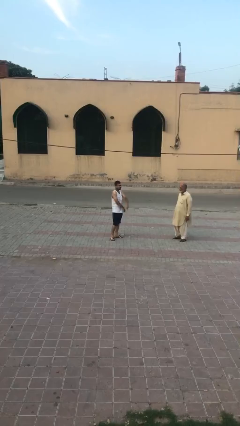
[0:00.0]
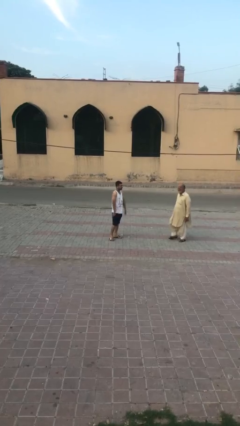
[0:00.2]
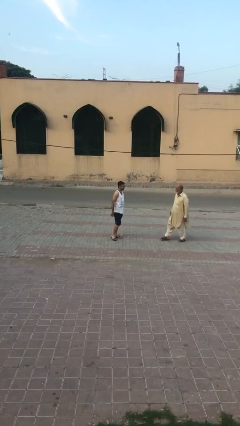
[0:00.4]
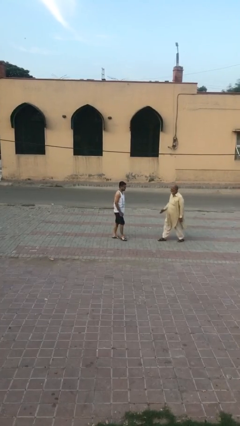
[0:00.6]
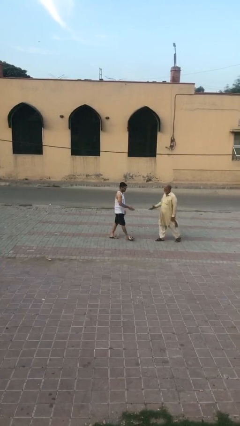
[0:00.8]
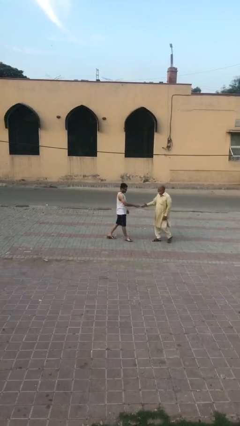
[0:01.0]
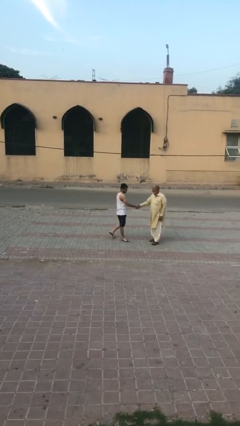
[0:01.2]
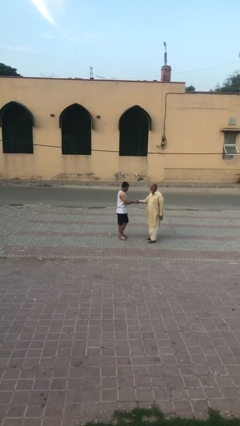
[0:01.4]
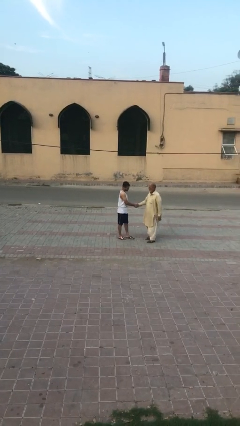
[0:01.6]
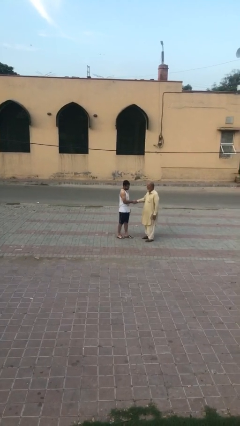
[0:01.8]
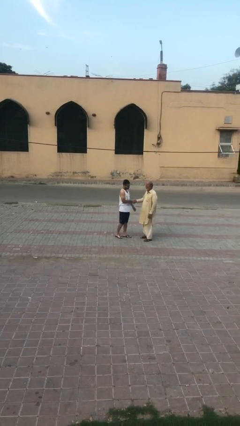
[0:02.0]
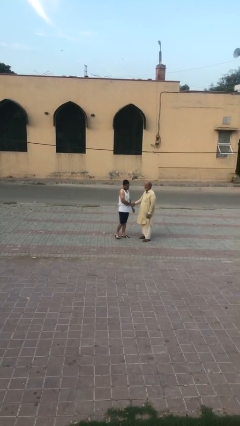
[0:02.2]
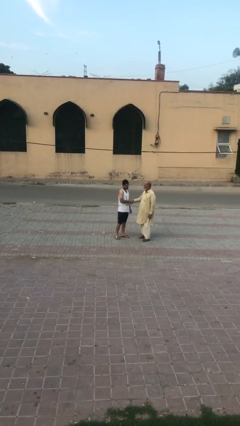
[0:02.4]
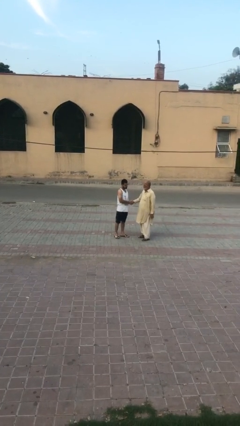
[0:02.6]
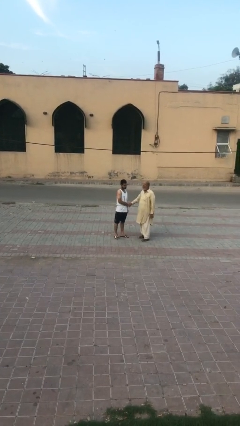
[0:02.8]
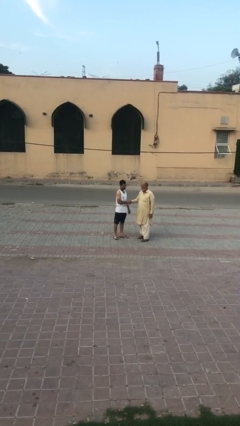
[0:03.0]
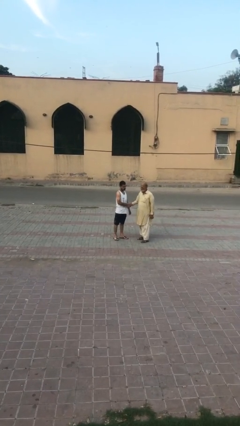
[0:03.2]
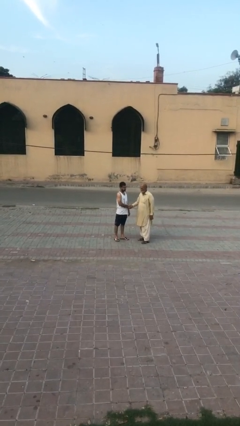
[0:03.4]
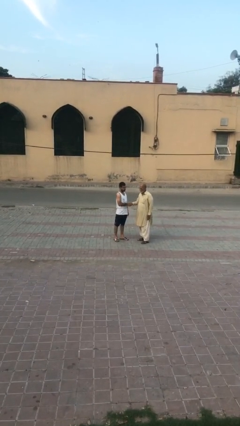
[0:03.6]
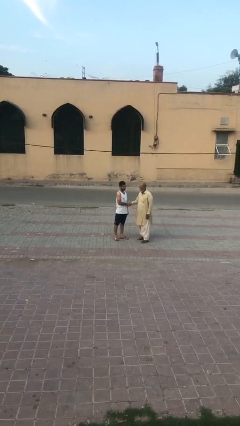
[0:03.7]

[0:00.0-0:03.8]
person shakes hand

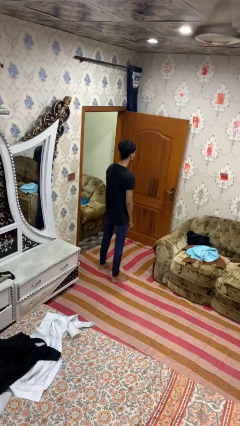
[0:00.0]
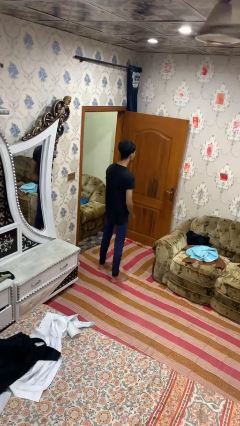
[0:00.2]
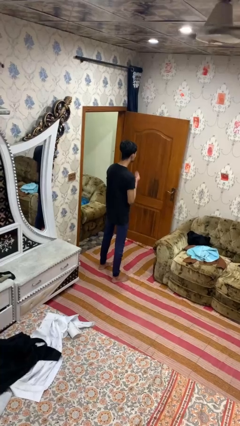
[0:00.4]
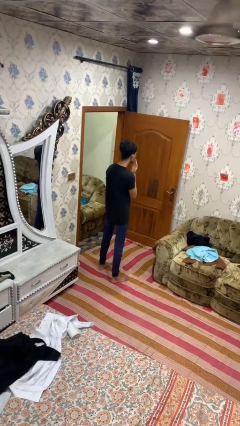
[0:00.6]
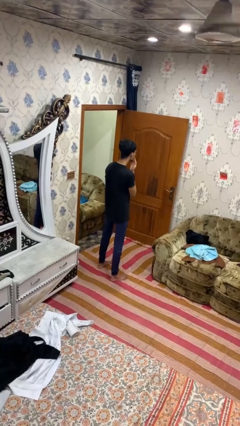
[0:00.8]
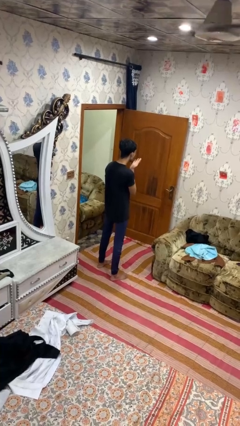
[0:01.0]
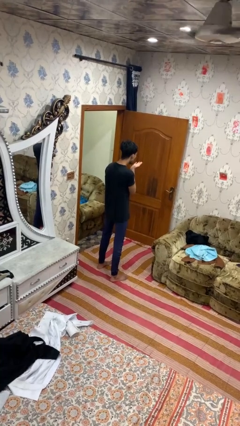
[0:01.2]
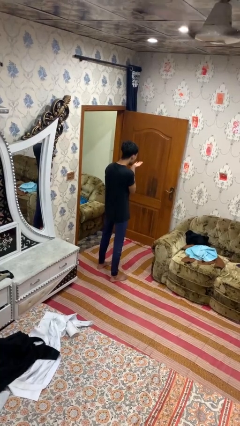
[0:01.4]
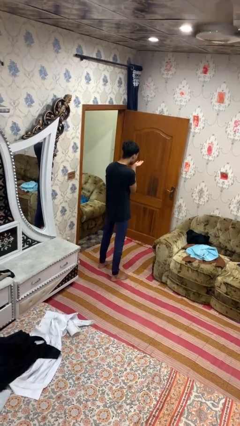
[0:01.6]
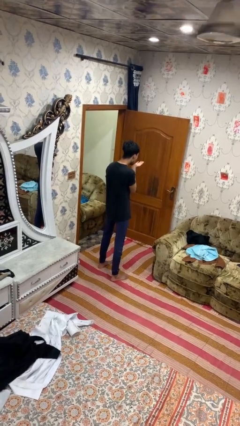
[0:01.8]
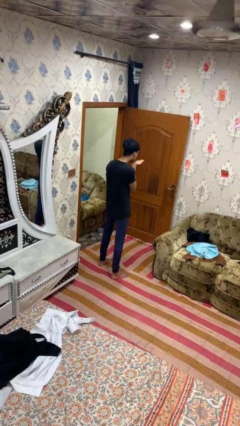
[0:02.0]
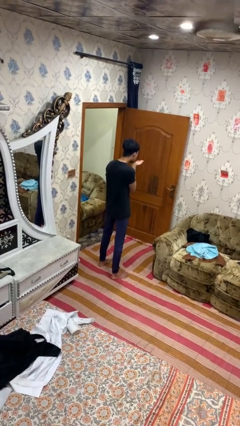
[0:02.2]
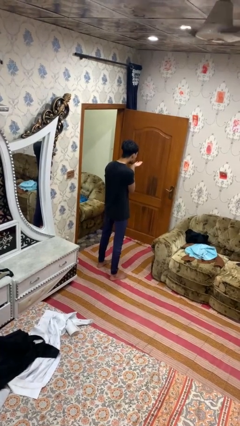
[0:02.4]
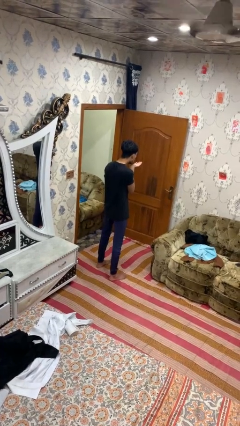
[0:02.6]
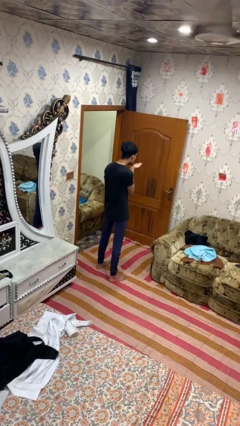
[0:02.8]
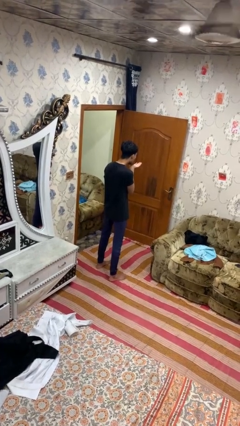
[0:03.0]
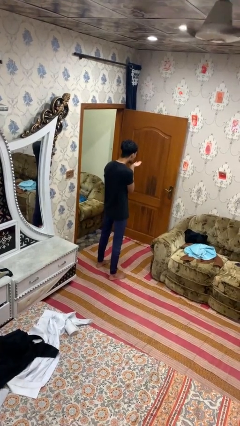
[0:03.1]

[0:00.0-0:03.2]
person gestures blow kiss

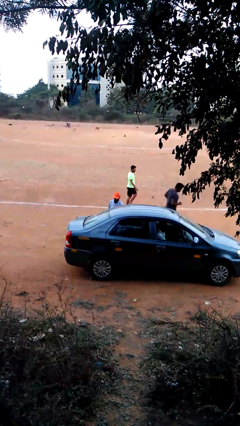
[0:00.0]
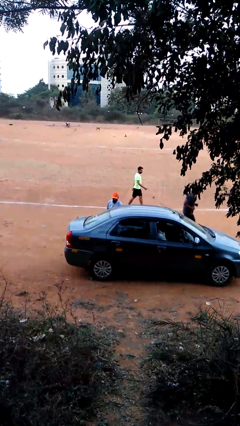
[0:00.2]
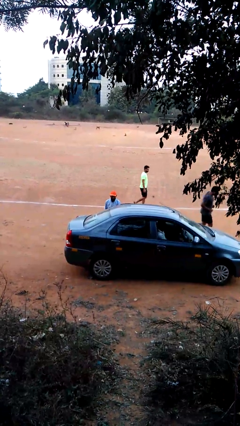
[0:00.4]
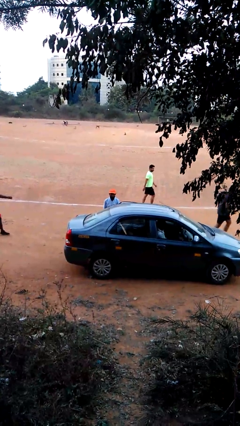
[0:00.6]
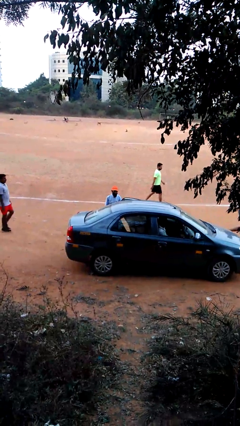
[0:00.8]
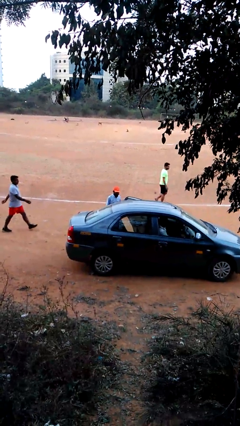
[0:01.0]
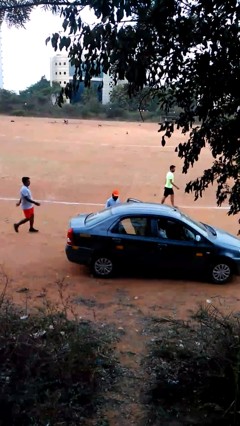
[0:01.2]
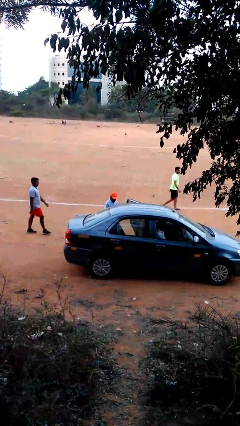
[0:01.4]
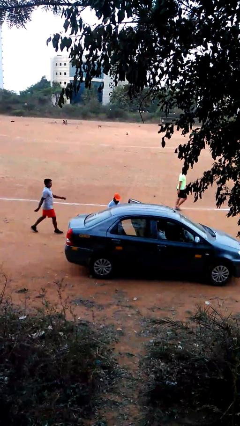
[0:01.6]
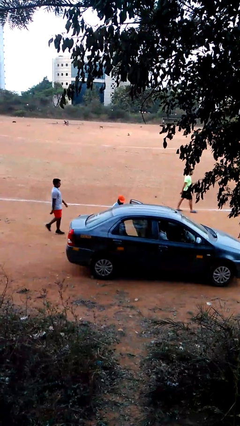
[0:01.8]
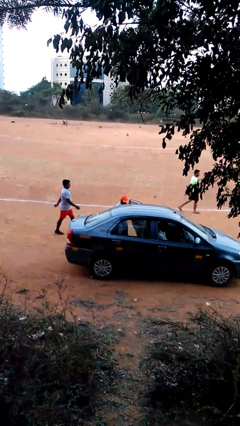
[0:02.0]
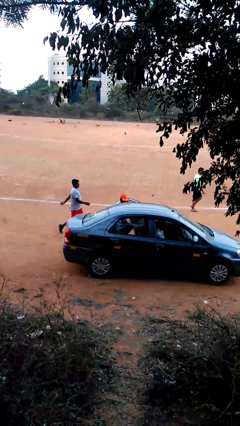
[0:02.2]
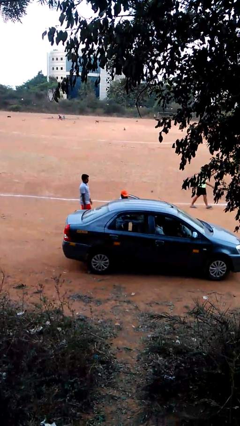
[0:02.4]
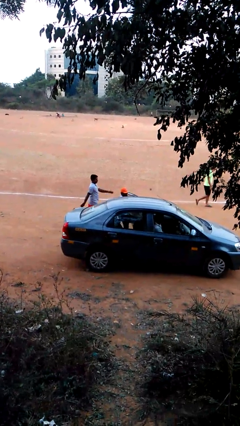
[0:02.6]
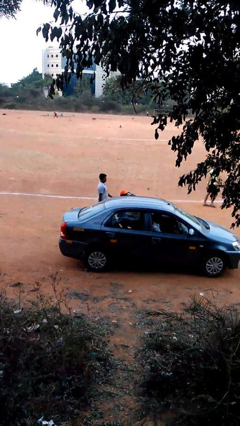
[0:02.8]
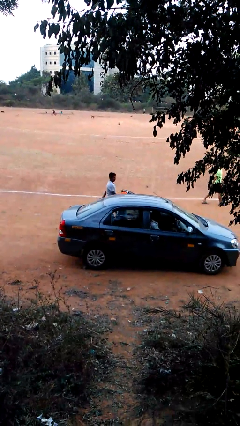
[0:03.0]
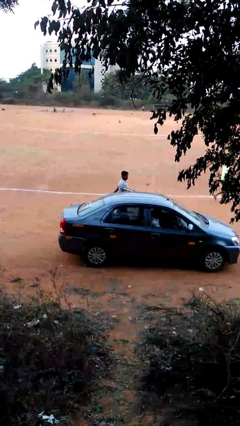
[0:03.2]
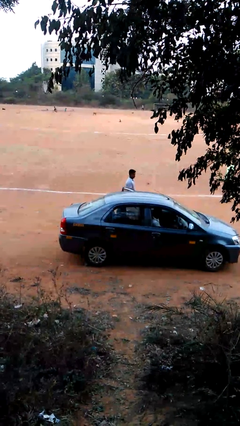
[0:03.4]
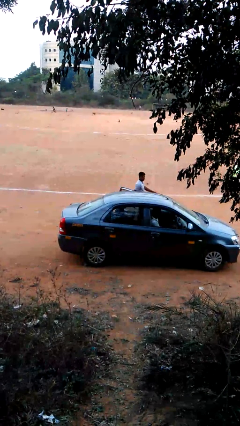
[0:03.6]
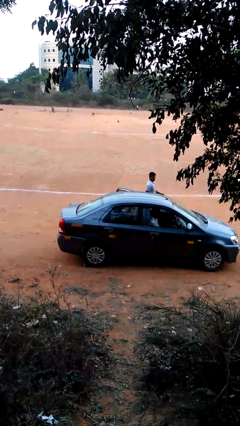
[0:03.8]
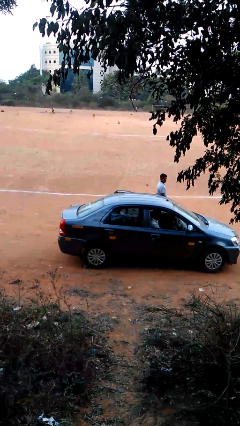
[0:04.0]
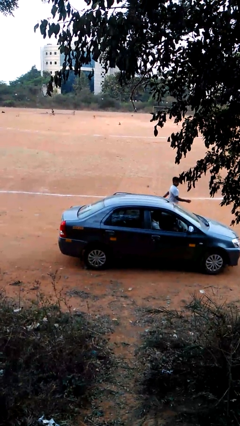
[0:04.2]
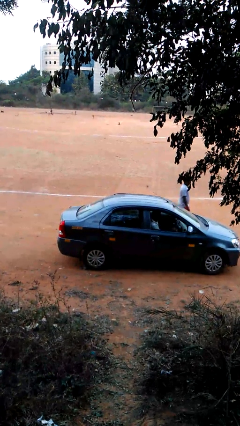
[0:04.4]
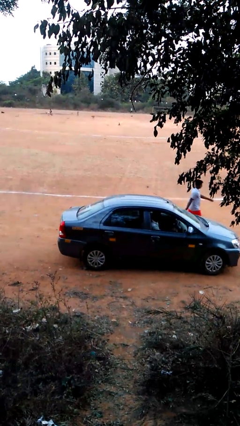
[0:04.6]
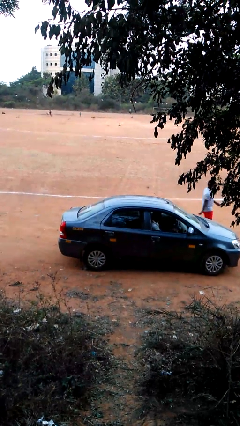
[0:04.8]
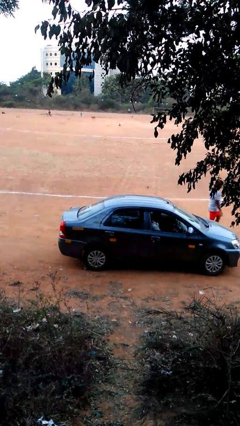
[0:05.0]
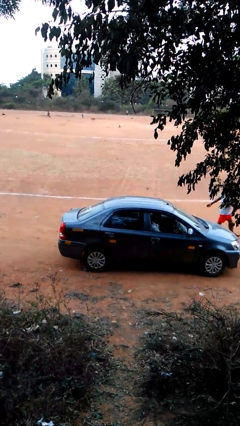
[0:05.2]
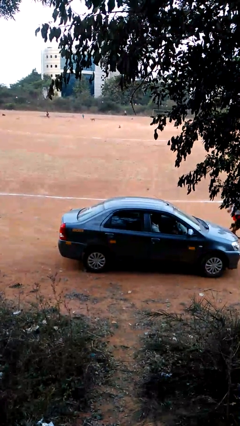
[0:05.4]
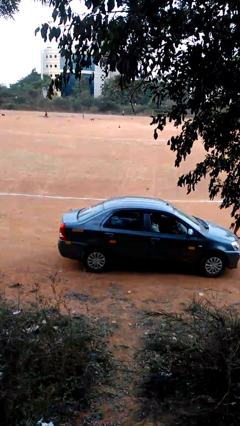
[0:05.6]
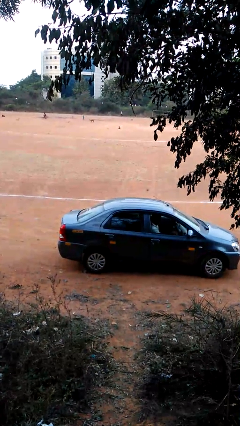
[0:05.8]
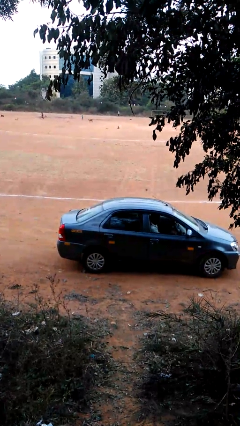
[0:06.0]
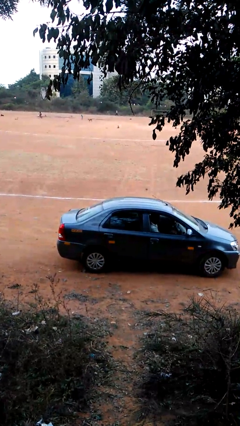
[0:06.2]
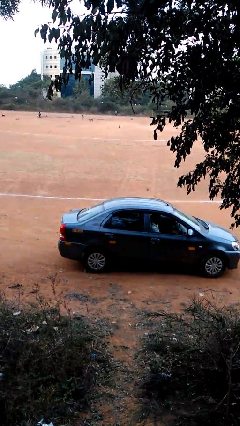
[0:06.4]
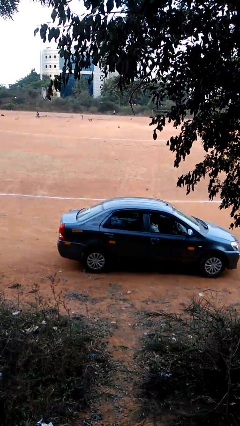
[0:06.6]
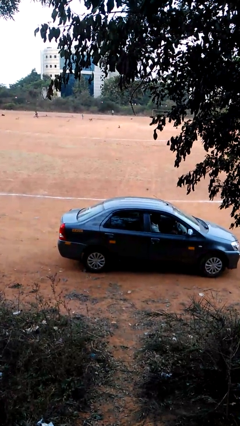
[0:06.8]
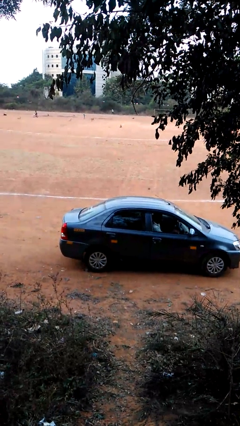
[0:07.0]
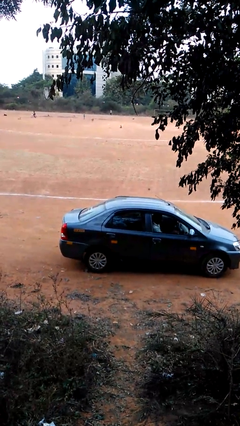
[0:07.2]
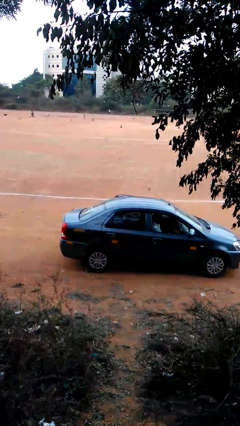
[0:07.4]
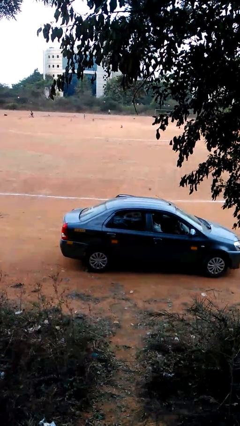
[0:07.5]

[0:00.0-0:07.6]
person enters car

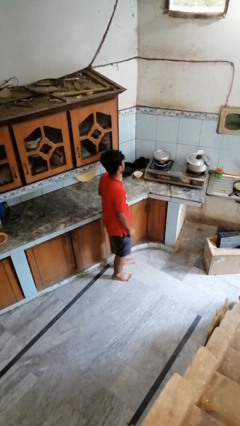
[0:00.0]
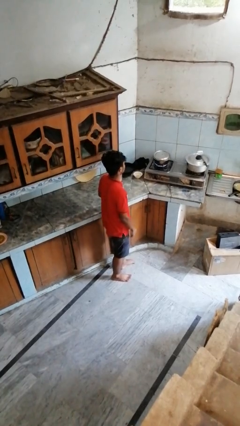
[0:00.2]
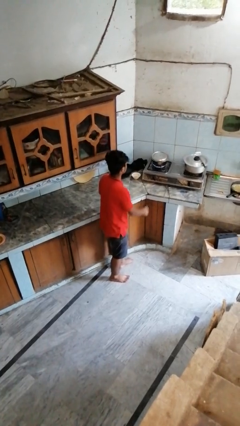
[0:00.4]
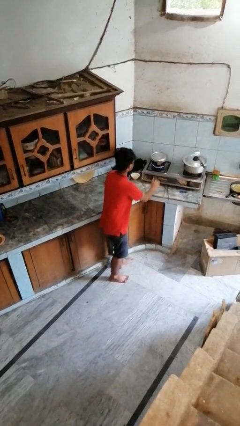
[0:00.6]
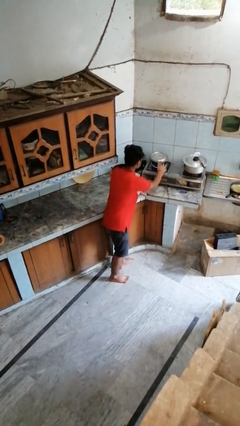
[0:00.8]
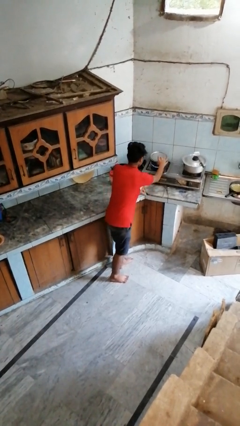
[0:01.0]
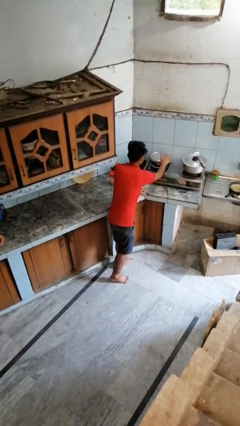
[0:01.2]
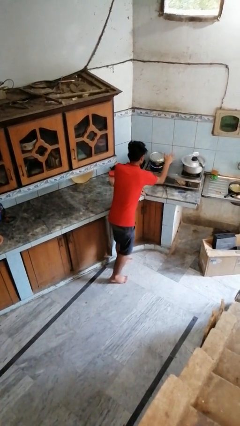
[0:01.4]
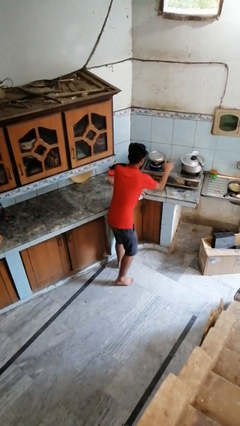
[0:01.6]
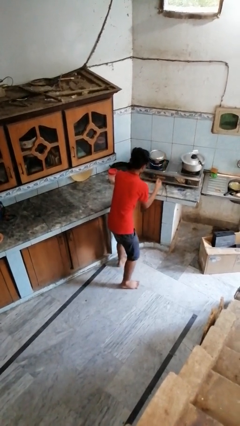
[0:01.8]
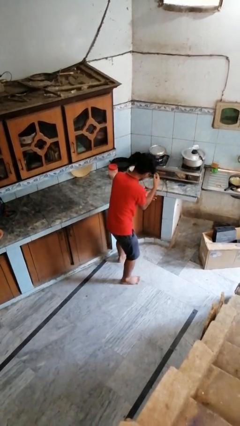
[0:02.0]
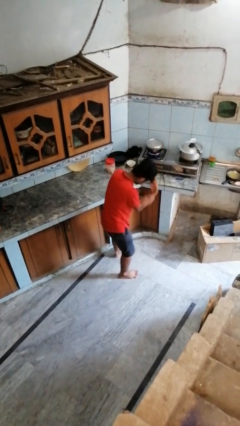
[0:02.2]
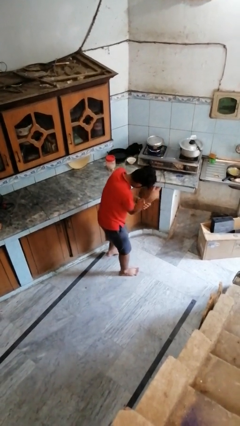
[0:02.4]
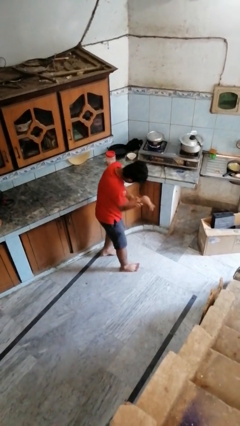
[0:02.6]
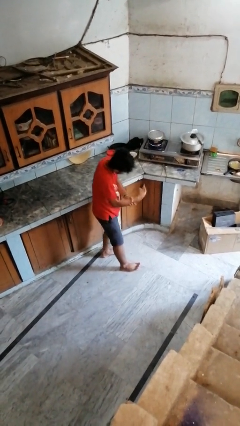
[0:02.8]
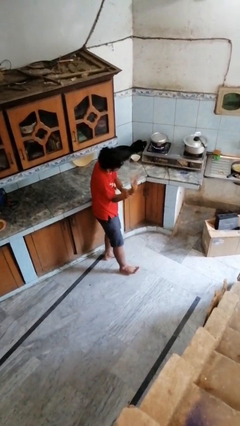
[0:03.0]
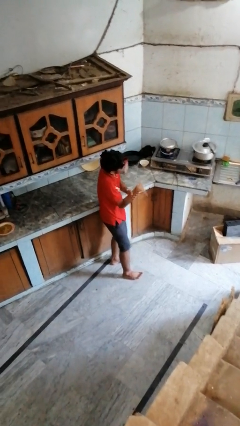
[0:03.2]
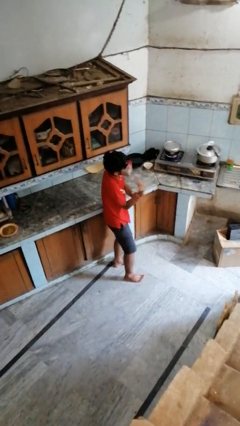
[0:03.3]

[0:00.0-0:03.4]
person burns hand
